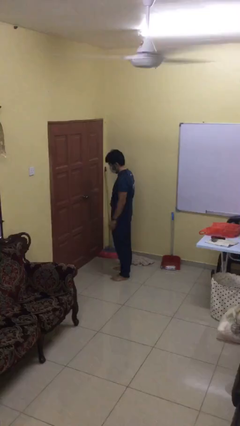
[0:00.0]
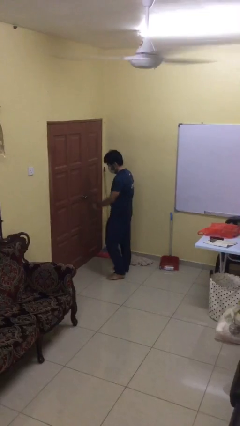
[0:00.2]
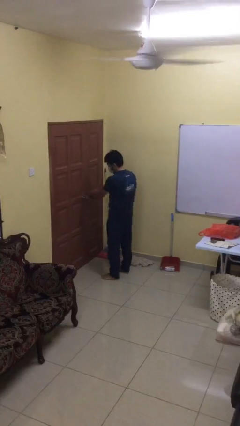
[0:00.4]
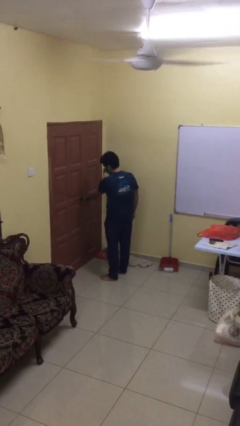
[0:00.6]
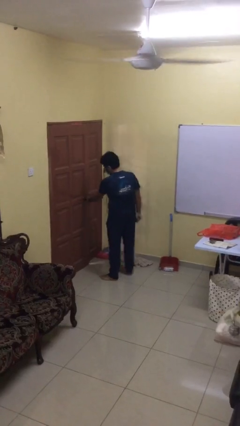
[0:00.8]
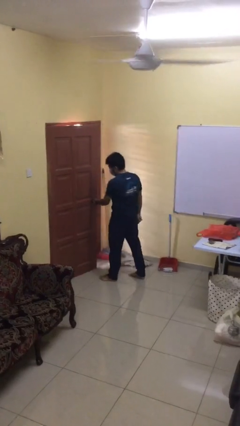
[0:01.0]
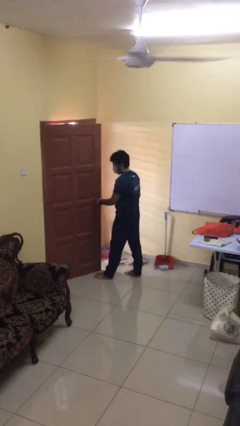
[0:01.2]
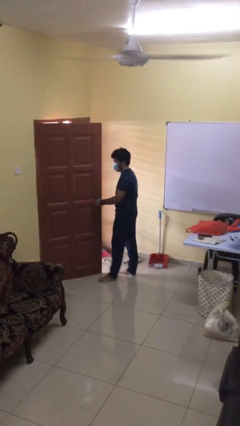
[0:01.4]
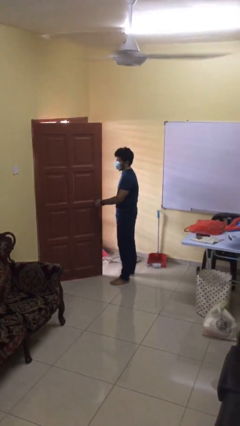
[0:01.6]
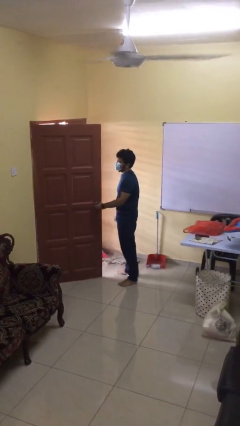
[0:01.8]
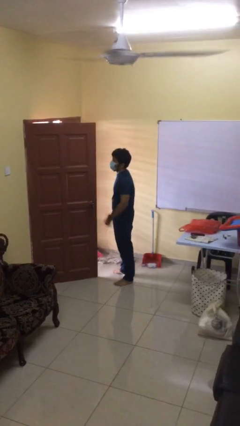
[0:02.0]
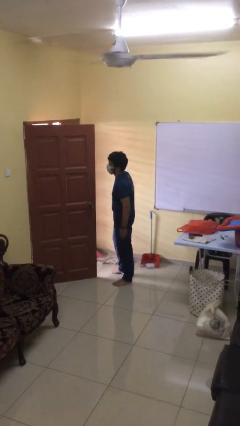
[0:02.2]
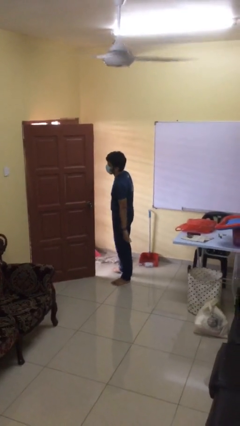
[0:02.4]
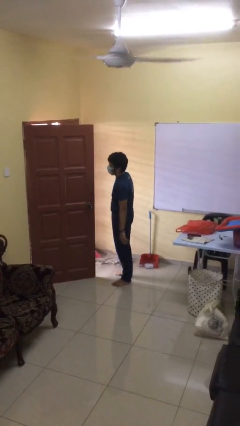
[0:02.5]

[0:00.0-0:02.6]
person opens facility door

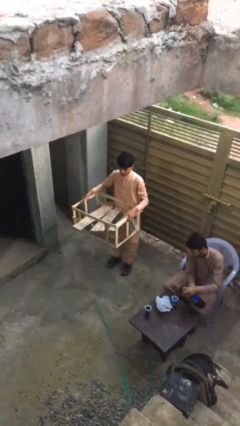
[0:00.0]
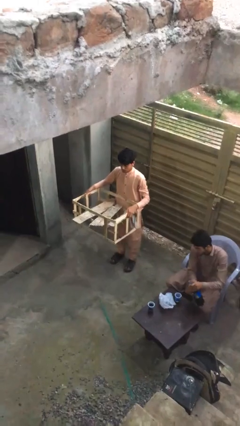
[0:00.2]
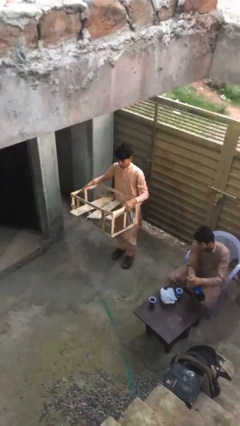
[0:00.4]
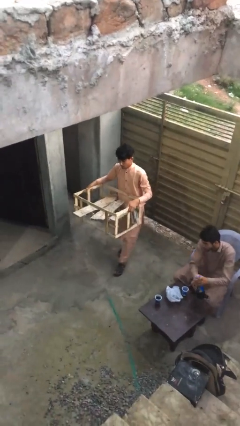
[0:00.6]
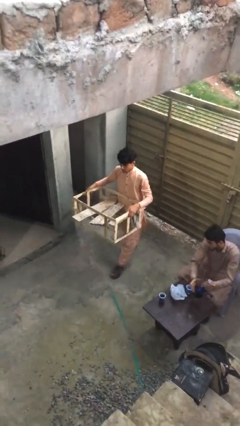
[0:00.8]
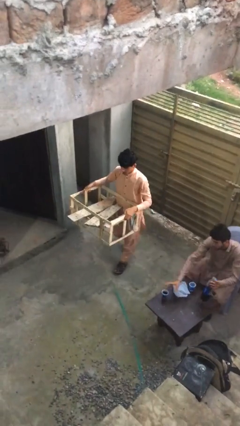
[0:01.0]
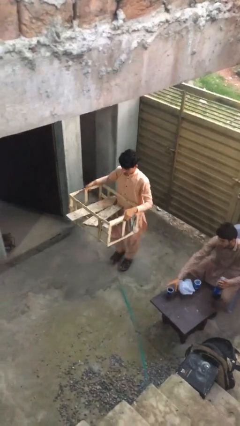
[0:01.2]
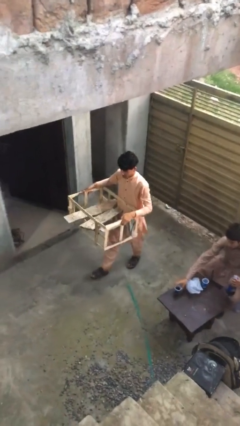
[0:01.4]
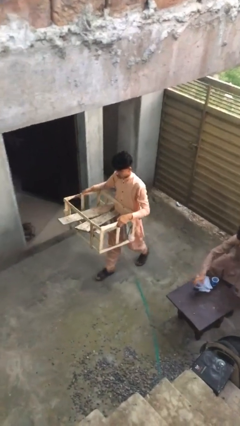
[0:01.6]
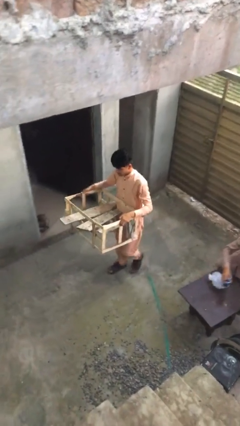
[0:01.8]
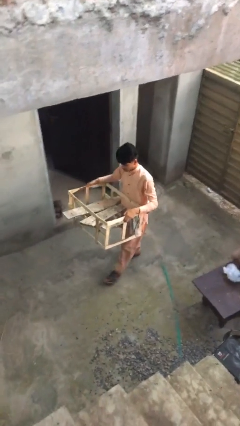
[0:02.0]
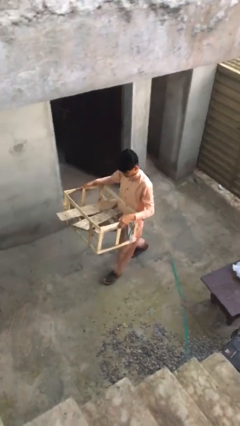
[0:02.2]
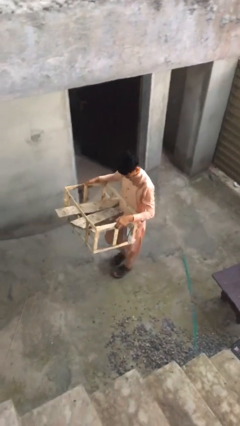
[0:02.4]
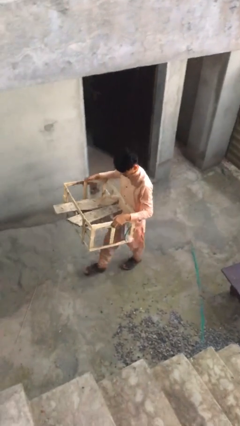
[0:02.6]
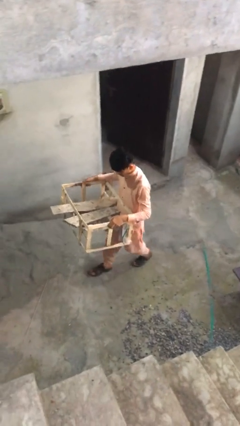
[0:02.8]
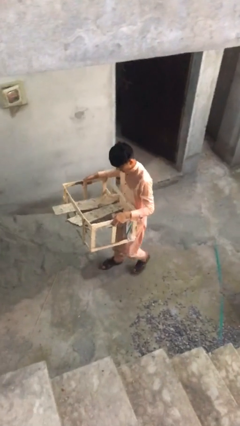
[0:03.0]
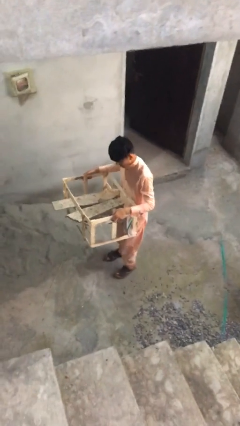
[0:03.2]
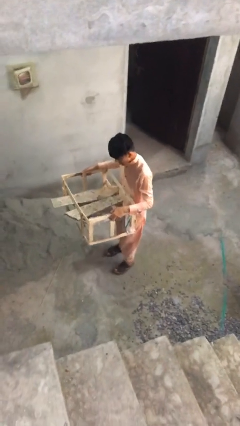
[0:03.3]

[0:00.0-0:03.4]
person carries heavy object

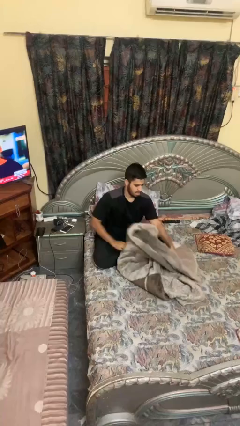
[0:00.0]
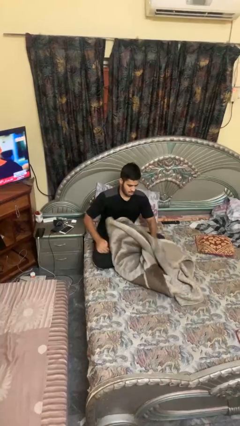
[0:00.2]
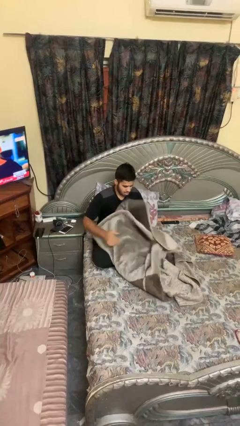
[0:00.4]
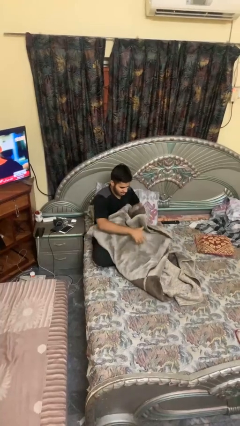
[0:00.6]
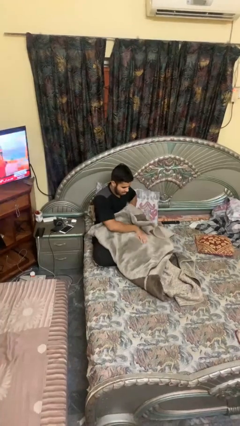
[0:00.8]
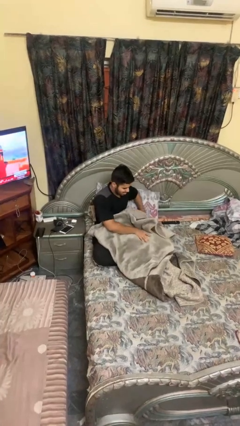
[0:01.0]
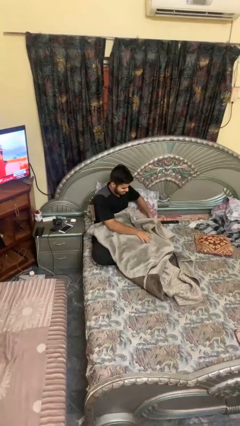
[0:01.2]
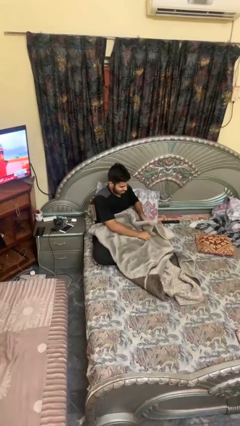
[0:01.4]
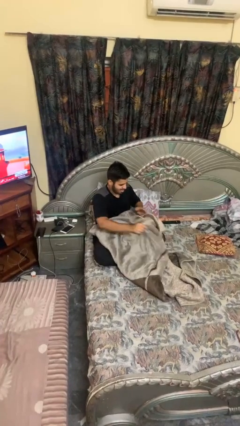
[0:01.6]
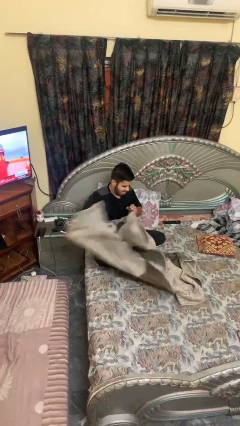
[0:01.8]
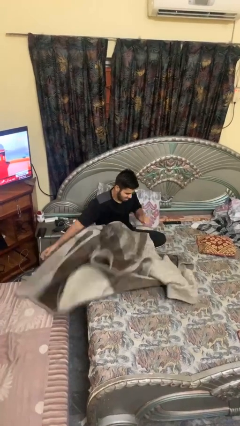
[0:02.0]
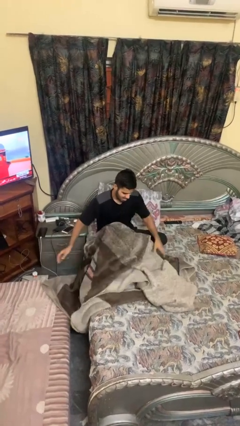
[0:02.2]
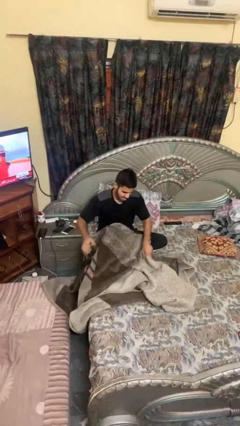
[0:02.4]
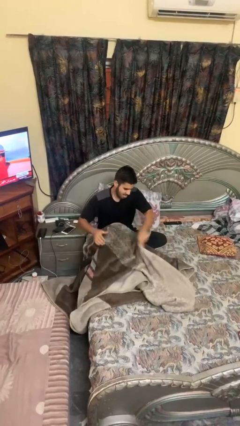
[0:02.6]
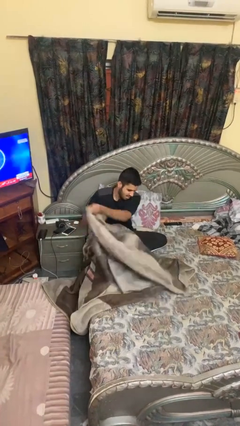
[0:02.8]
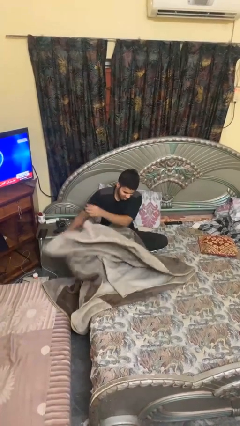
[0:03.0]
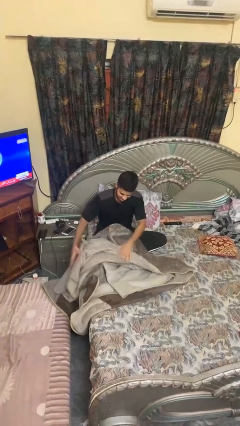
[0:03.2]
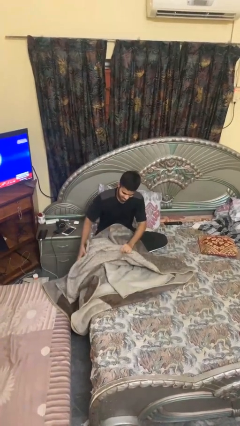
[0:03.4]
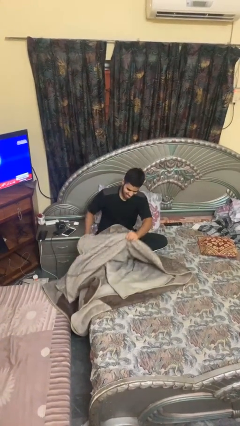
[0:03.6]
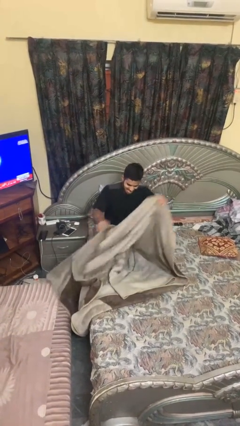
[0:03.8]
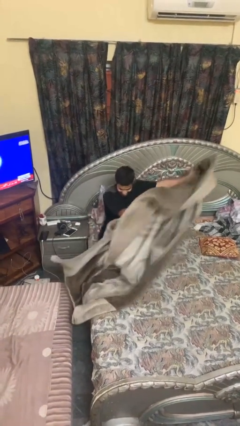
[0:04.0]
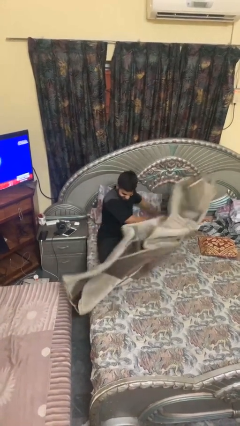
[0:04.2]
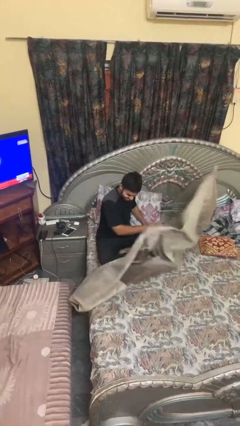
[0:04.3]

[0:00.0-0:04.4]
person unfolds blanket

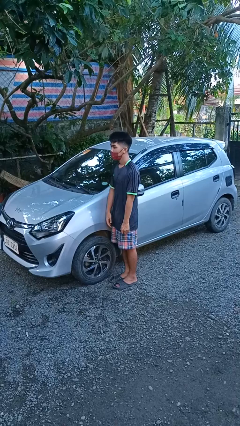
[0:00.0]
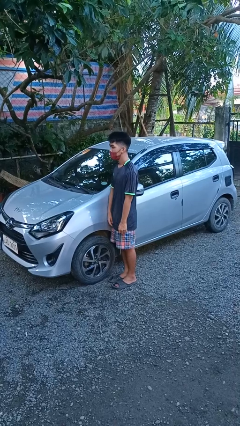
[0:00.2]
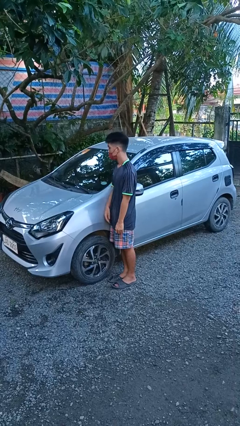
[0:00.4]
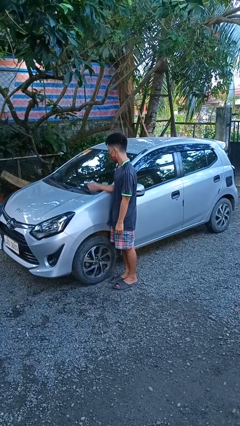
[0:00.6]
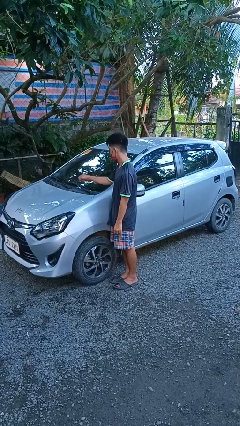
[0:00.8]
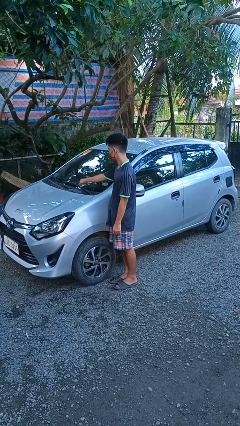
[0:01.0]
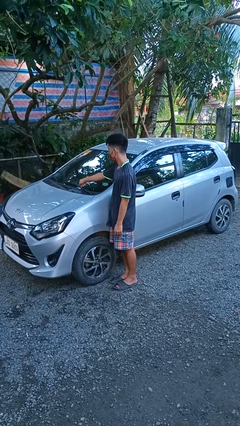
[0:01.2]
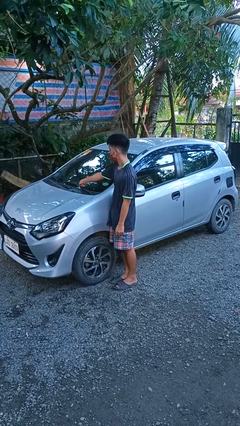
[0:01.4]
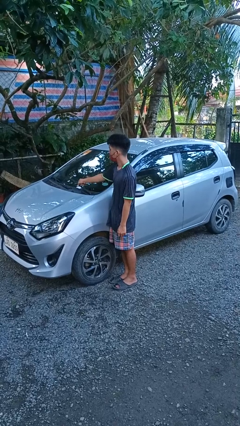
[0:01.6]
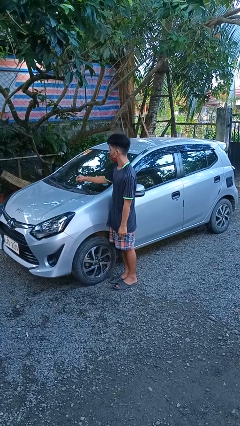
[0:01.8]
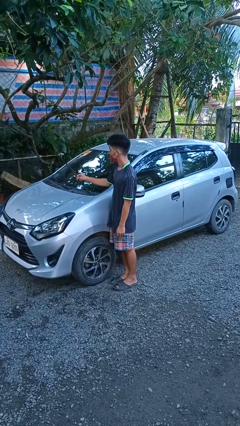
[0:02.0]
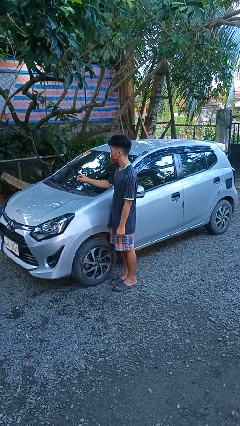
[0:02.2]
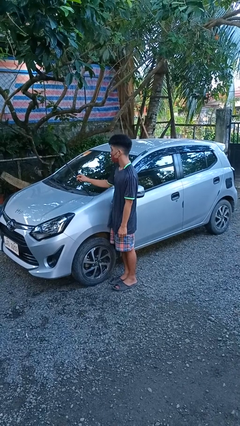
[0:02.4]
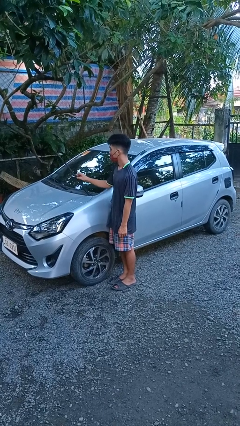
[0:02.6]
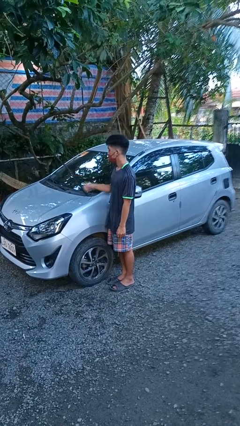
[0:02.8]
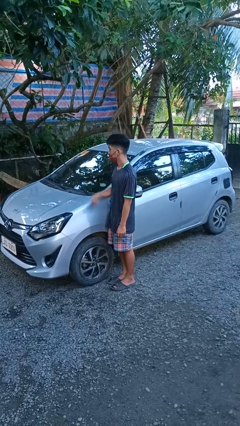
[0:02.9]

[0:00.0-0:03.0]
person flips up car wipers

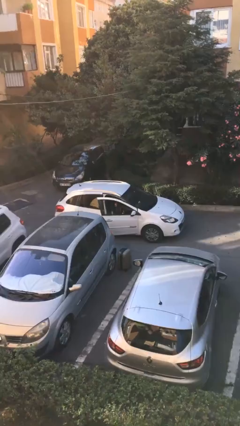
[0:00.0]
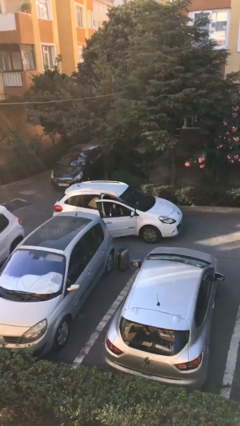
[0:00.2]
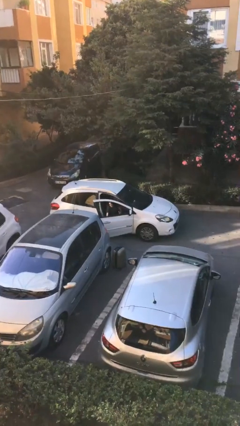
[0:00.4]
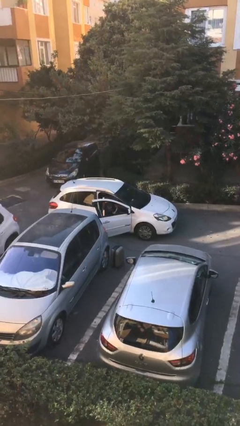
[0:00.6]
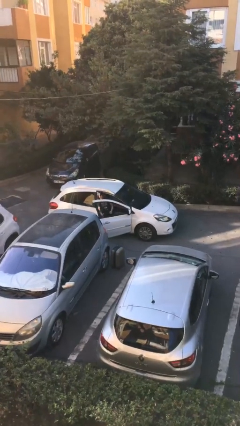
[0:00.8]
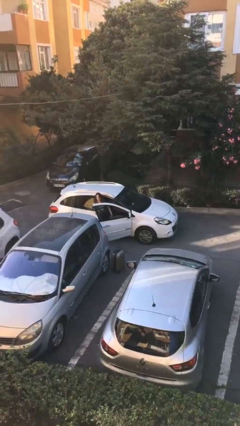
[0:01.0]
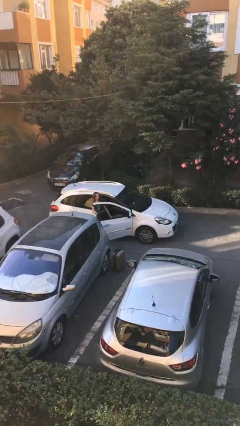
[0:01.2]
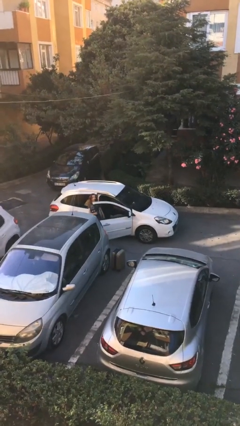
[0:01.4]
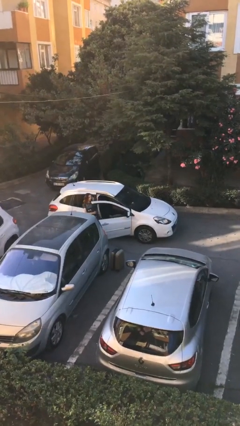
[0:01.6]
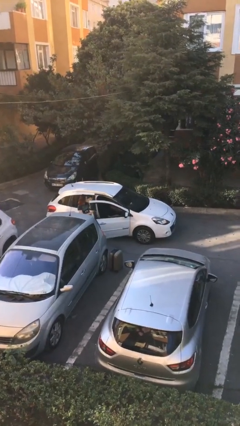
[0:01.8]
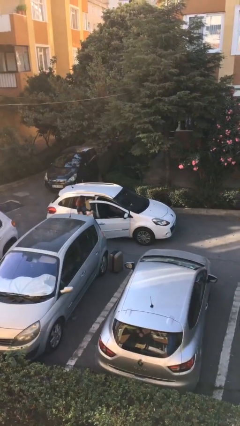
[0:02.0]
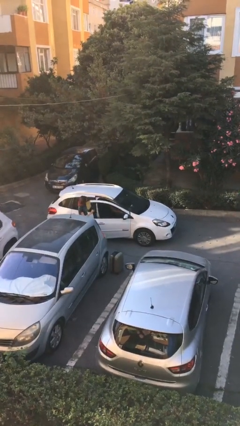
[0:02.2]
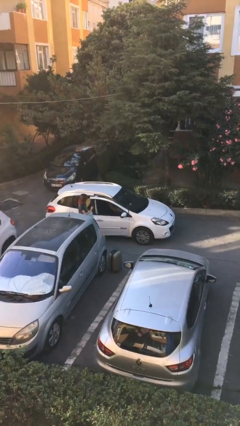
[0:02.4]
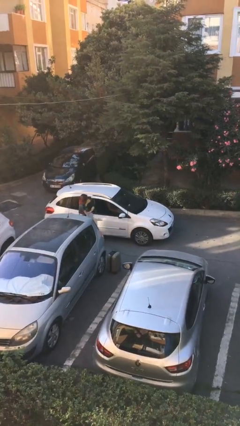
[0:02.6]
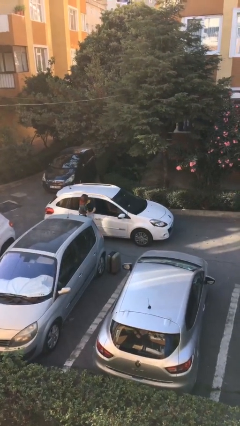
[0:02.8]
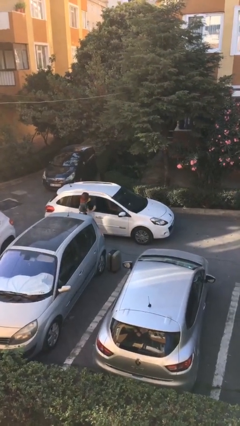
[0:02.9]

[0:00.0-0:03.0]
car drops off person

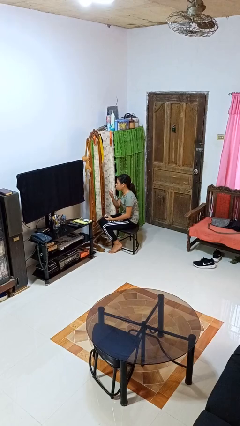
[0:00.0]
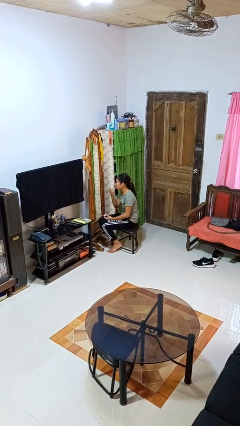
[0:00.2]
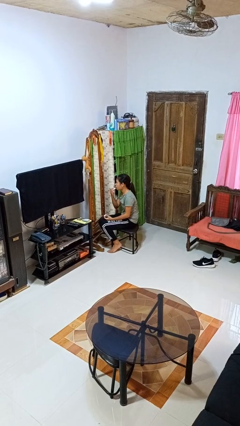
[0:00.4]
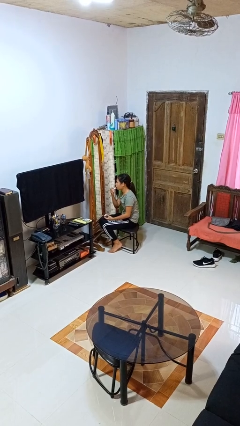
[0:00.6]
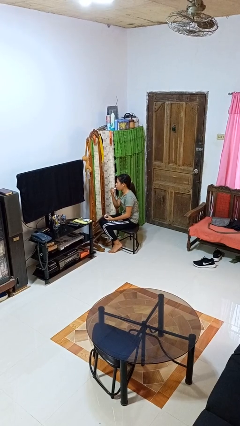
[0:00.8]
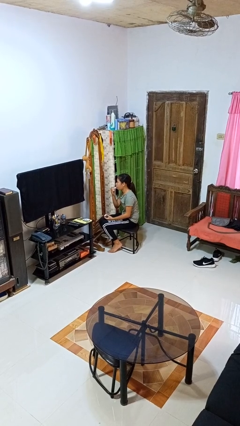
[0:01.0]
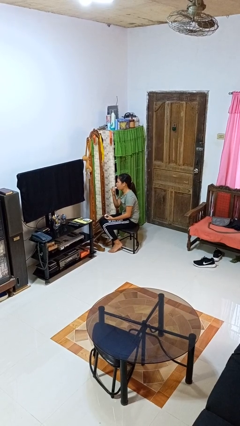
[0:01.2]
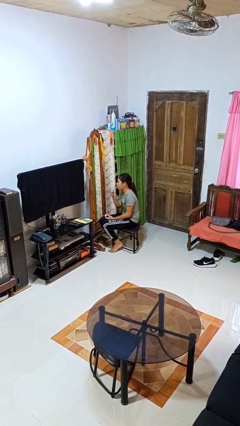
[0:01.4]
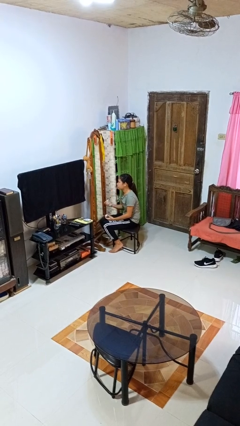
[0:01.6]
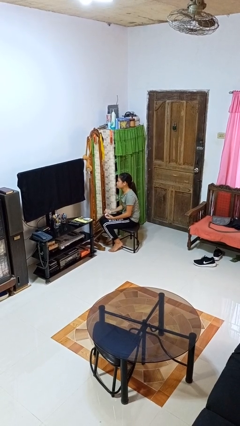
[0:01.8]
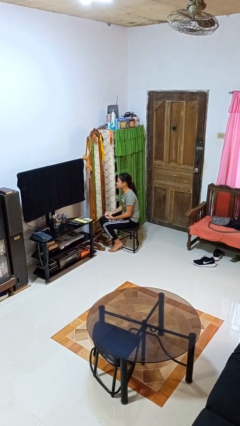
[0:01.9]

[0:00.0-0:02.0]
person applies lip makeup
